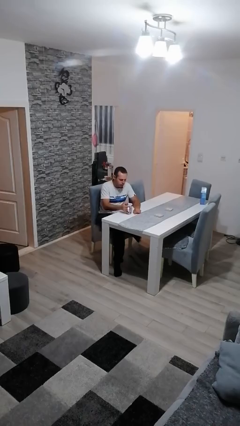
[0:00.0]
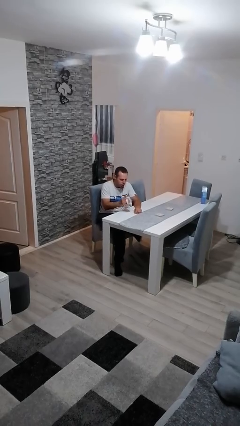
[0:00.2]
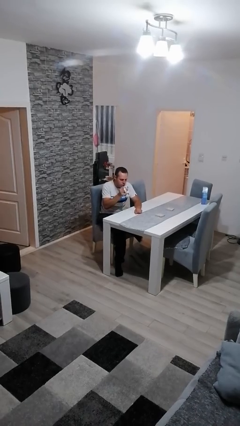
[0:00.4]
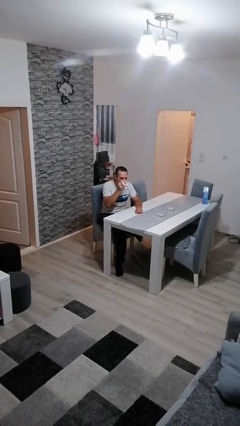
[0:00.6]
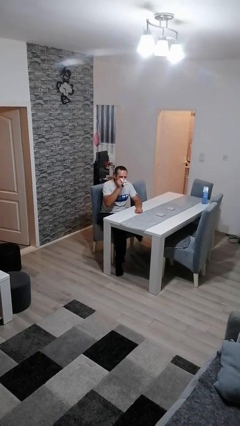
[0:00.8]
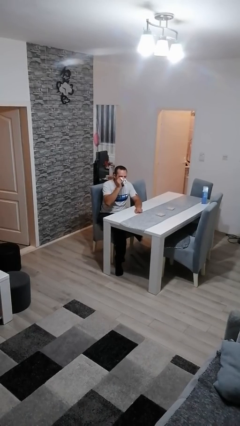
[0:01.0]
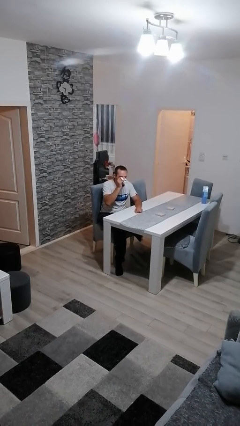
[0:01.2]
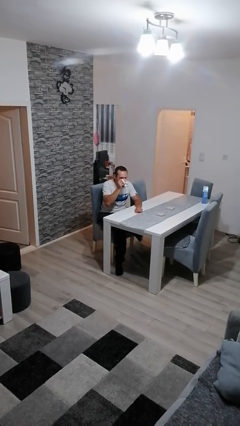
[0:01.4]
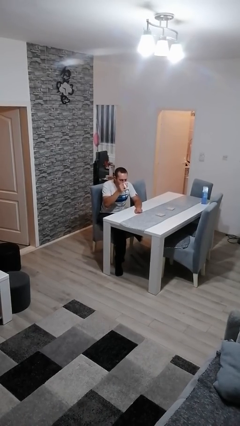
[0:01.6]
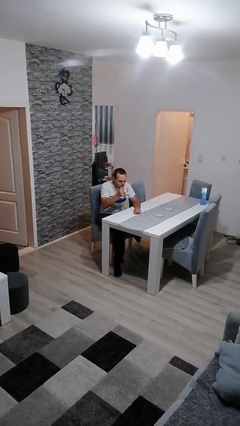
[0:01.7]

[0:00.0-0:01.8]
person drinks from mug

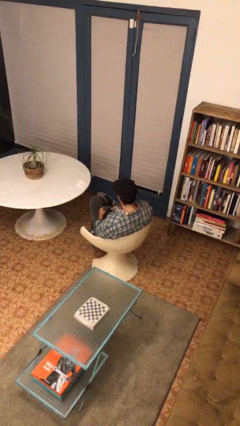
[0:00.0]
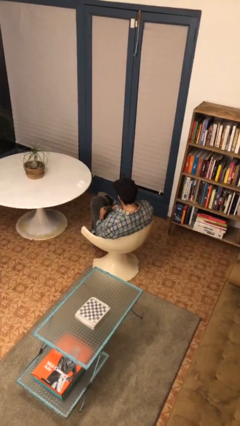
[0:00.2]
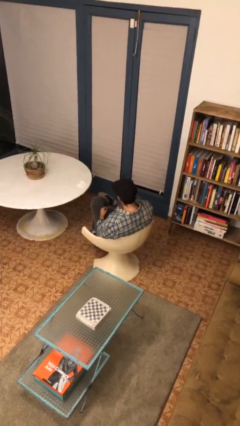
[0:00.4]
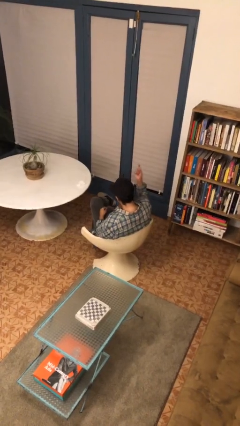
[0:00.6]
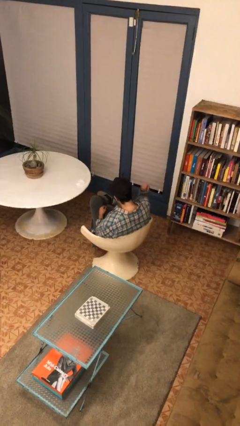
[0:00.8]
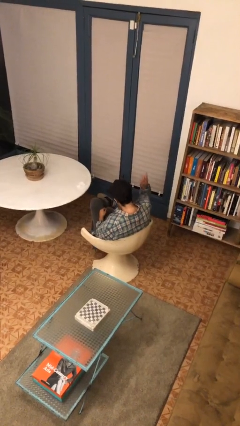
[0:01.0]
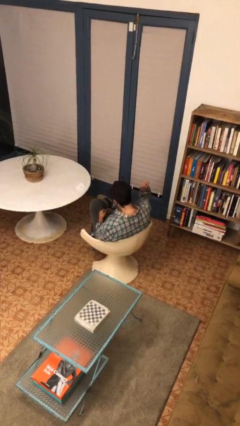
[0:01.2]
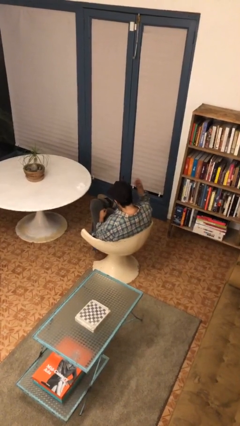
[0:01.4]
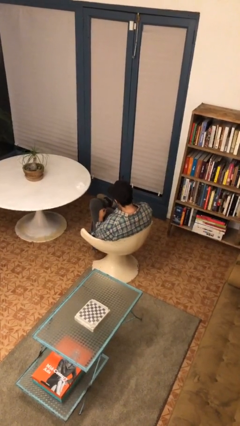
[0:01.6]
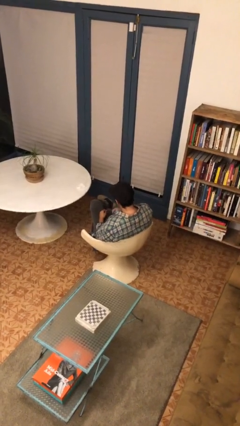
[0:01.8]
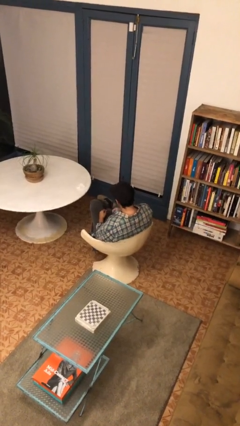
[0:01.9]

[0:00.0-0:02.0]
person gestures behind me

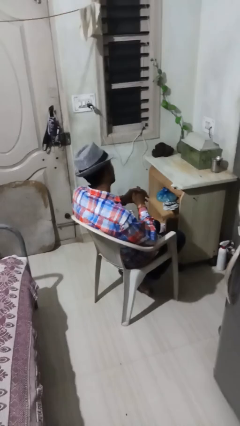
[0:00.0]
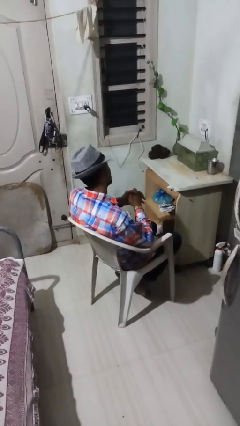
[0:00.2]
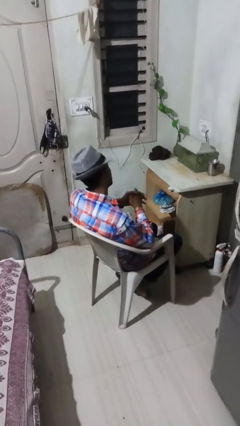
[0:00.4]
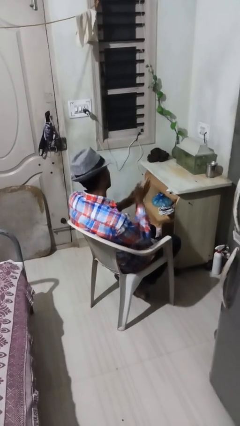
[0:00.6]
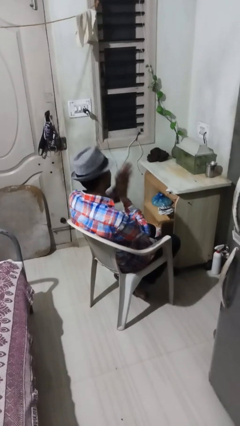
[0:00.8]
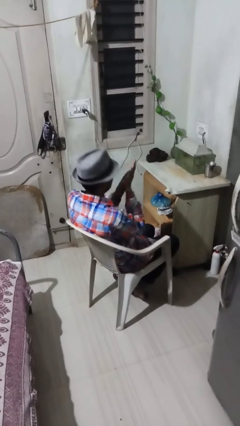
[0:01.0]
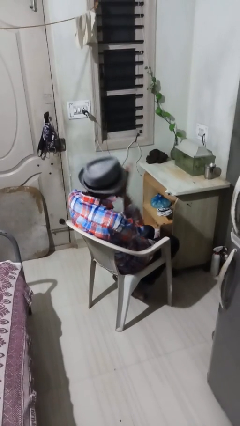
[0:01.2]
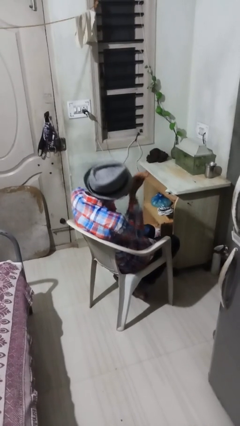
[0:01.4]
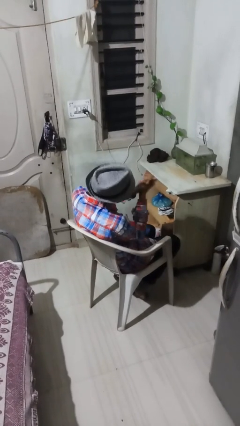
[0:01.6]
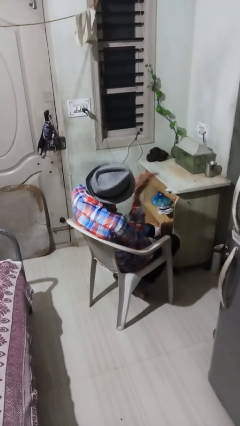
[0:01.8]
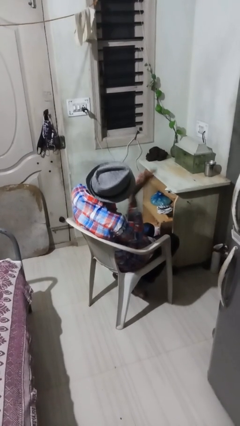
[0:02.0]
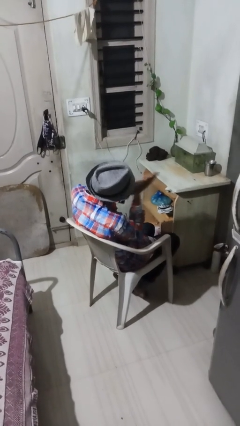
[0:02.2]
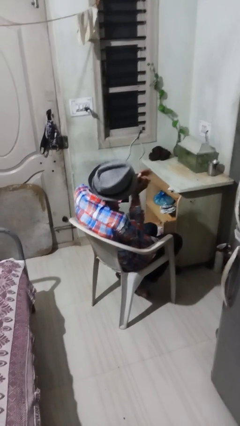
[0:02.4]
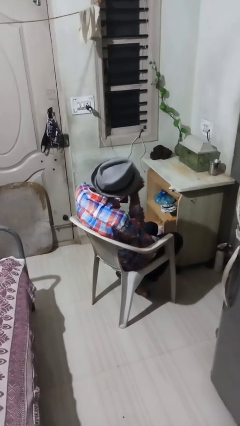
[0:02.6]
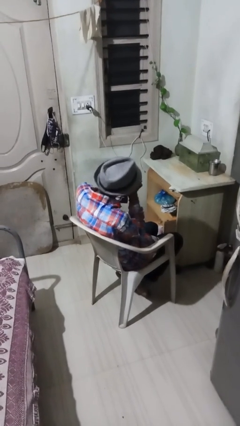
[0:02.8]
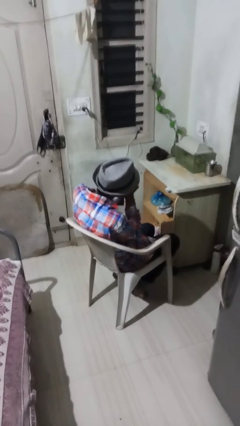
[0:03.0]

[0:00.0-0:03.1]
person blows into hands

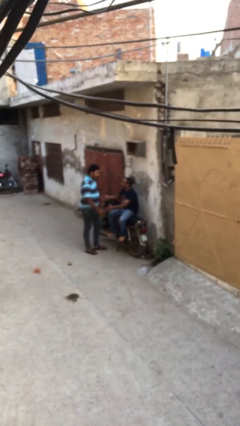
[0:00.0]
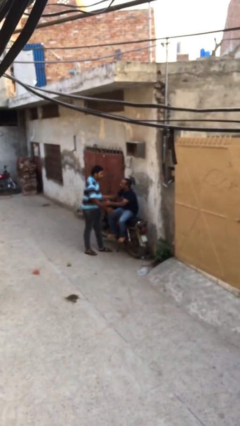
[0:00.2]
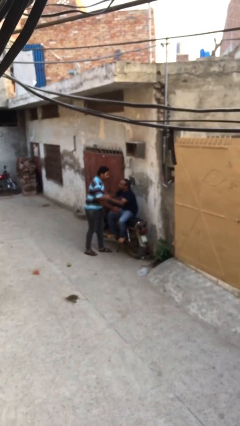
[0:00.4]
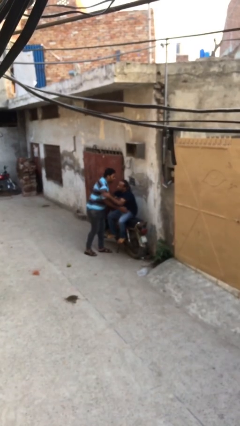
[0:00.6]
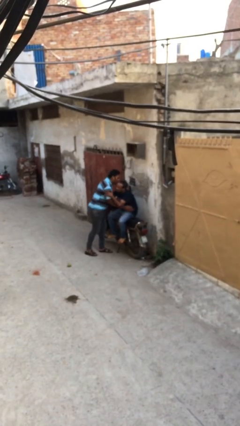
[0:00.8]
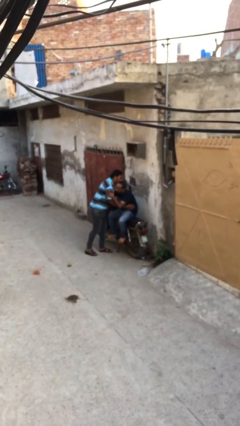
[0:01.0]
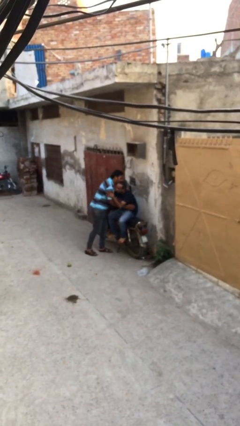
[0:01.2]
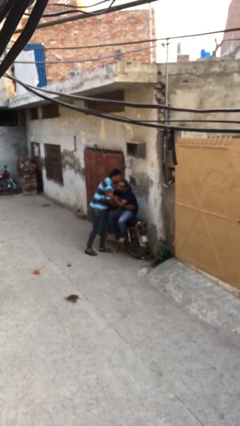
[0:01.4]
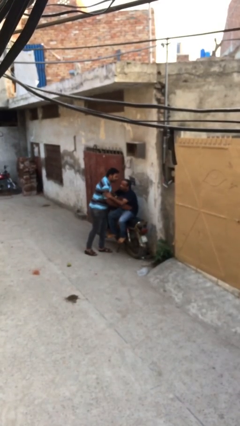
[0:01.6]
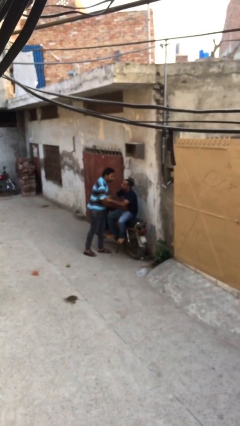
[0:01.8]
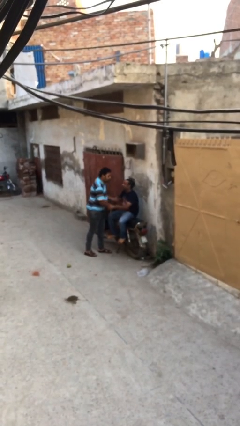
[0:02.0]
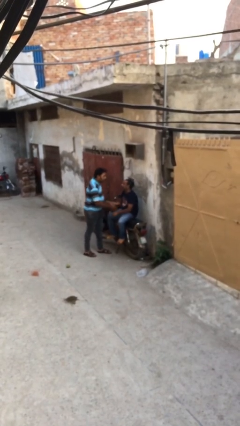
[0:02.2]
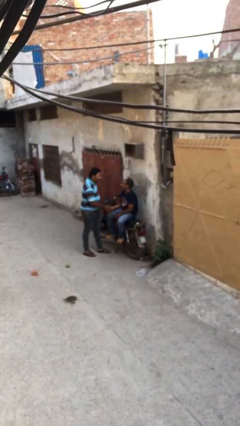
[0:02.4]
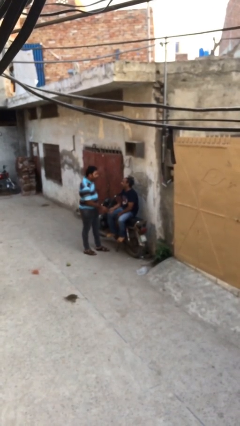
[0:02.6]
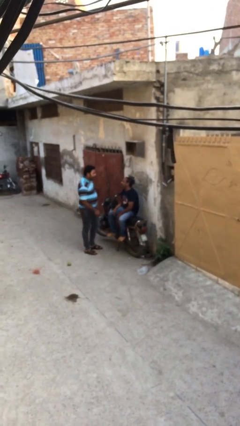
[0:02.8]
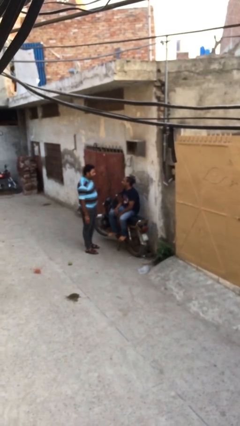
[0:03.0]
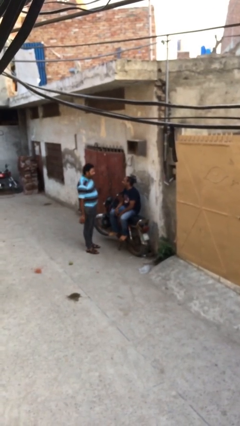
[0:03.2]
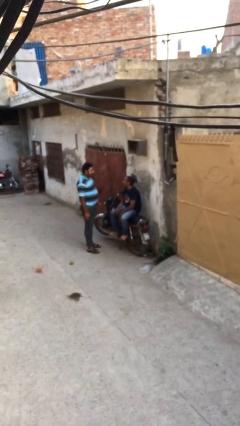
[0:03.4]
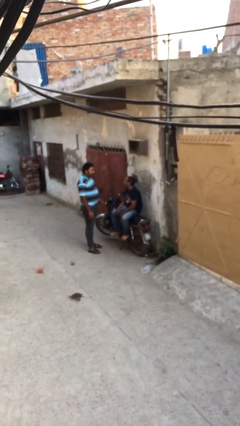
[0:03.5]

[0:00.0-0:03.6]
person embraces person

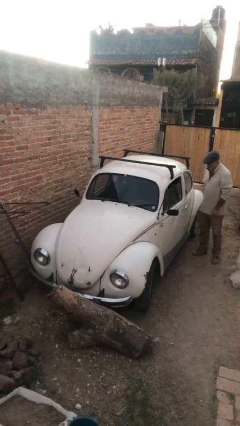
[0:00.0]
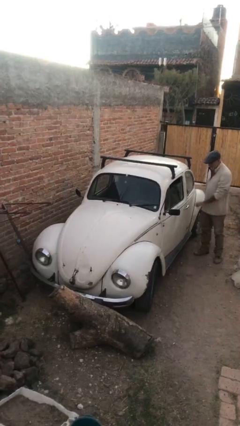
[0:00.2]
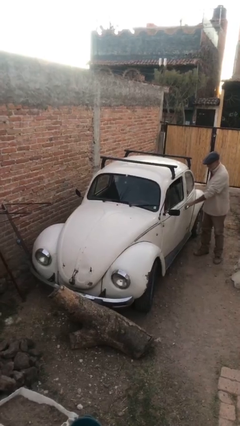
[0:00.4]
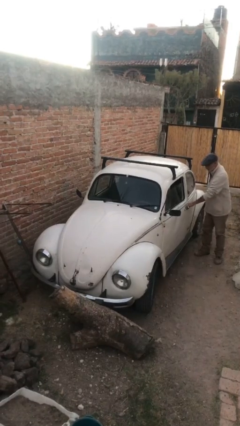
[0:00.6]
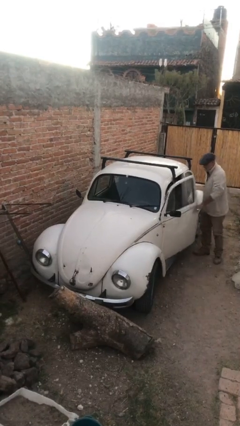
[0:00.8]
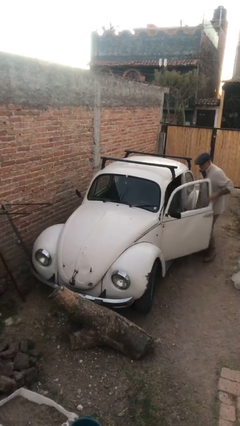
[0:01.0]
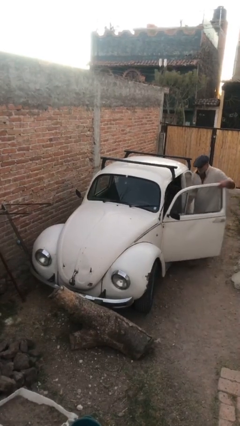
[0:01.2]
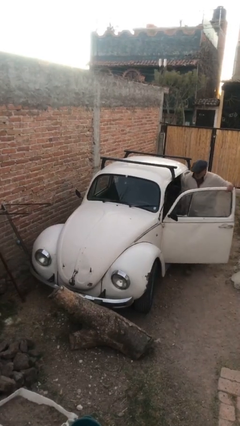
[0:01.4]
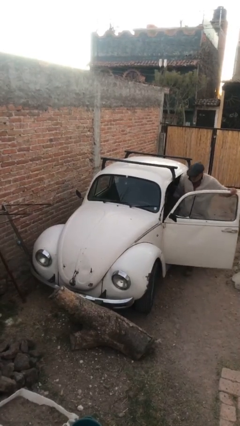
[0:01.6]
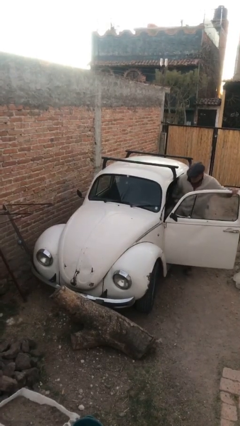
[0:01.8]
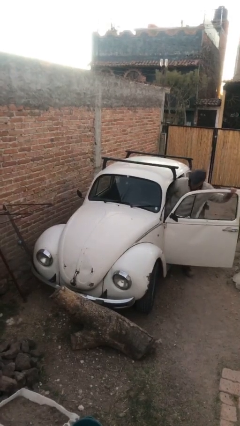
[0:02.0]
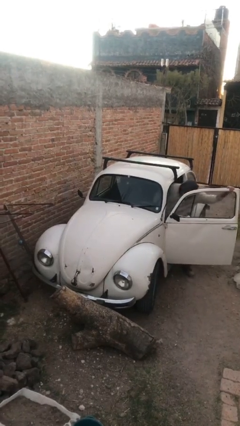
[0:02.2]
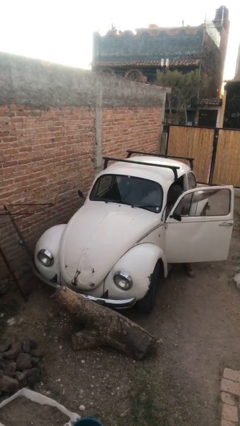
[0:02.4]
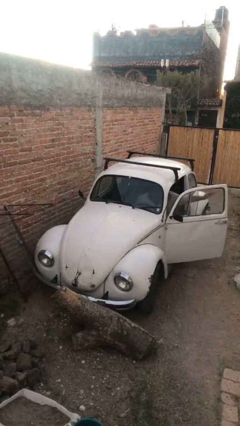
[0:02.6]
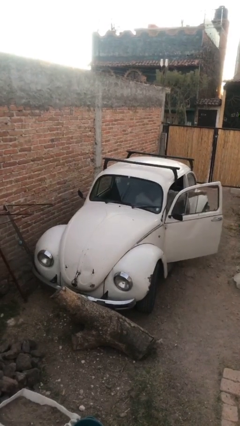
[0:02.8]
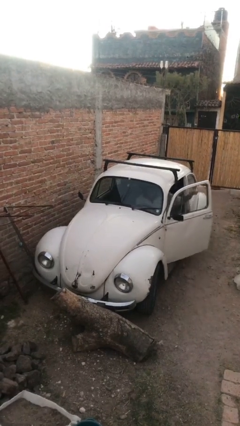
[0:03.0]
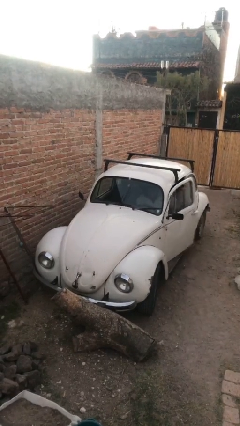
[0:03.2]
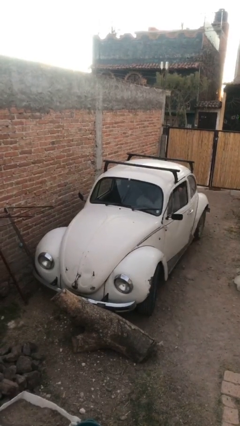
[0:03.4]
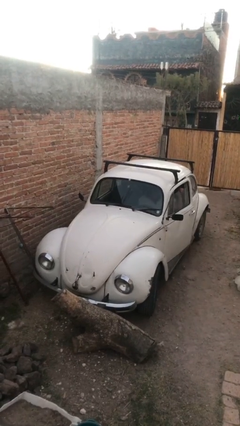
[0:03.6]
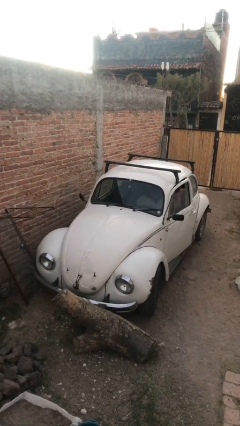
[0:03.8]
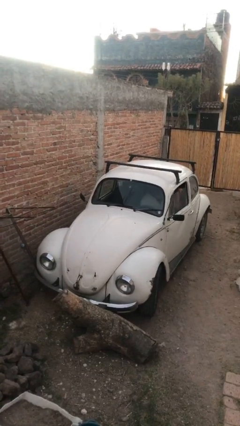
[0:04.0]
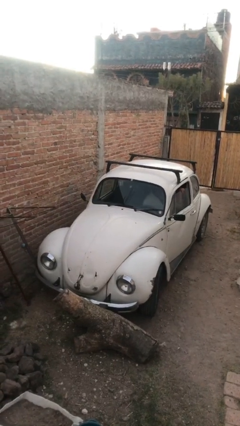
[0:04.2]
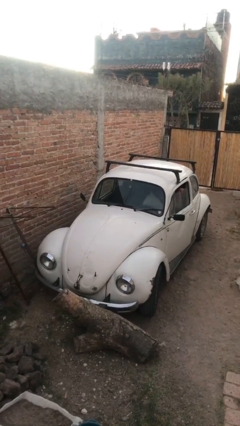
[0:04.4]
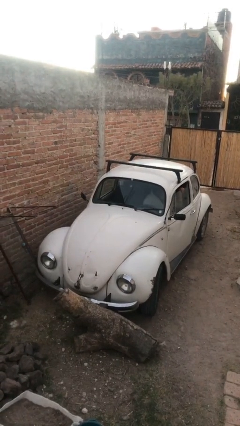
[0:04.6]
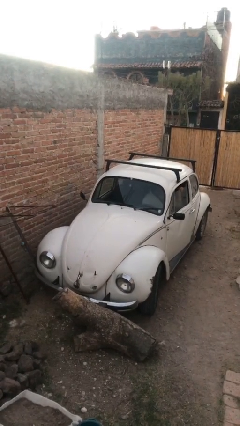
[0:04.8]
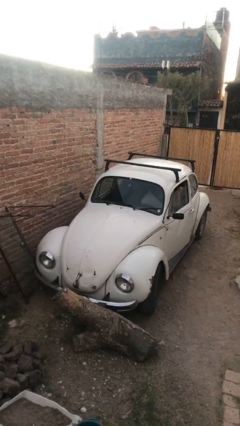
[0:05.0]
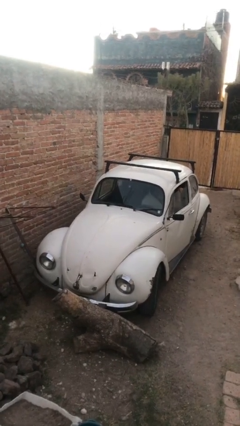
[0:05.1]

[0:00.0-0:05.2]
car picks up person

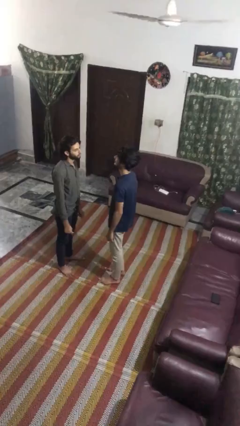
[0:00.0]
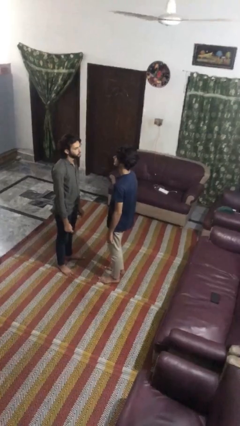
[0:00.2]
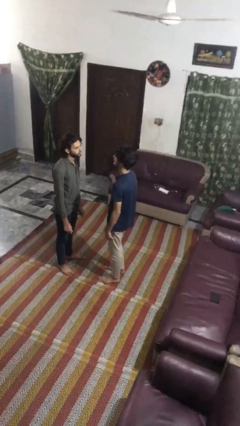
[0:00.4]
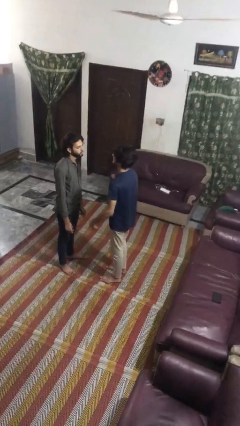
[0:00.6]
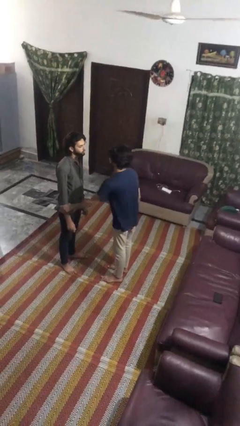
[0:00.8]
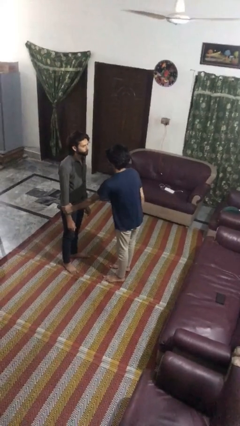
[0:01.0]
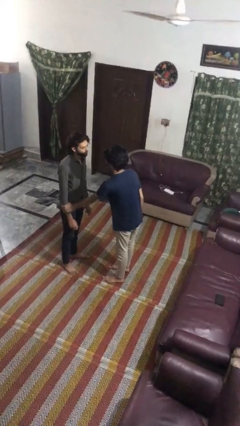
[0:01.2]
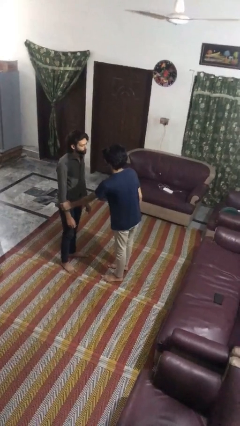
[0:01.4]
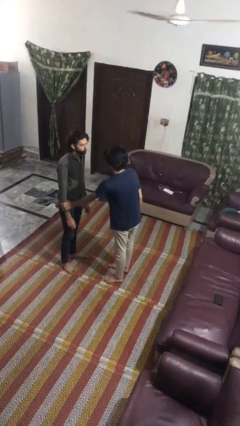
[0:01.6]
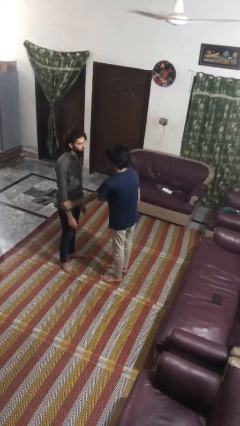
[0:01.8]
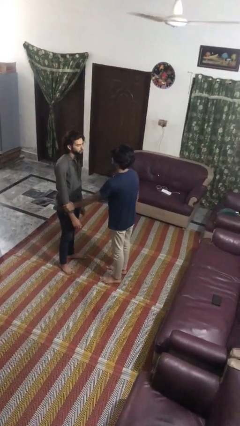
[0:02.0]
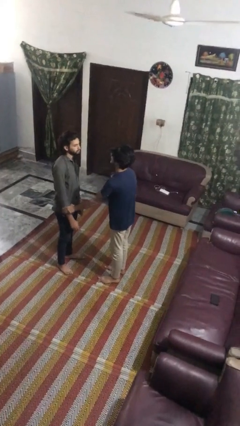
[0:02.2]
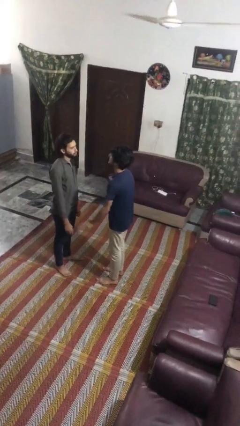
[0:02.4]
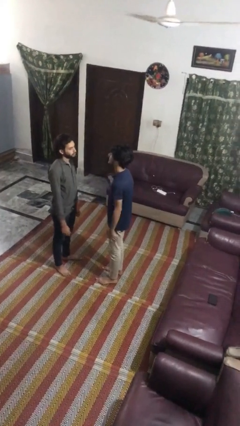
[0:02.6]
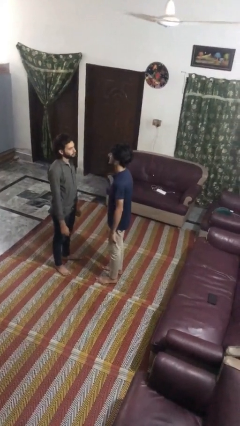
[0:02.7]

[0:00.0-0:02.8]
person grabs person by forearm
